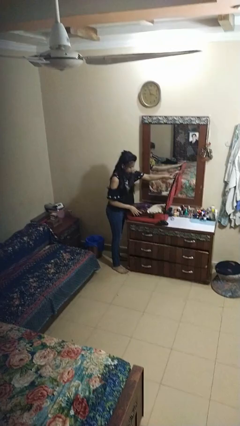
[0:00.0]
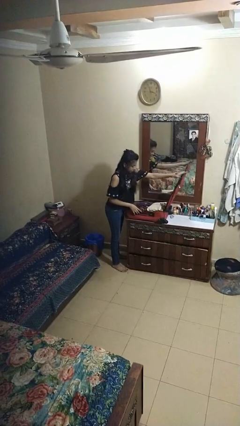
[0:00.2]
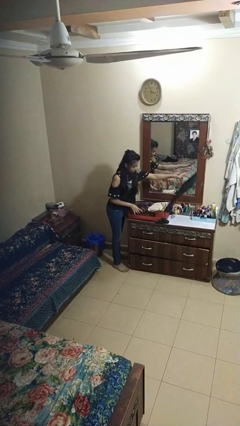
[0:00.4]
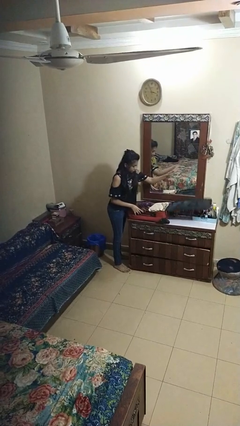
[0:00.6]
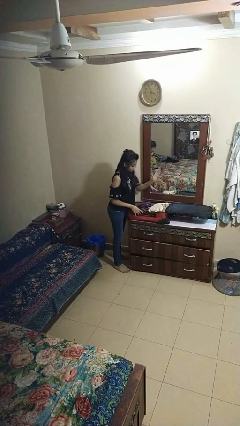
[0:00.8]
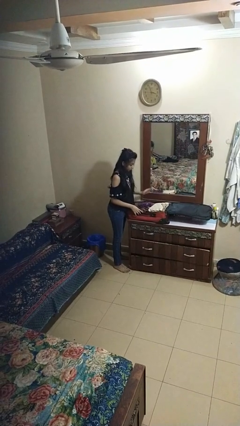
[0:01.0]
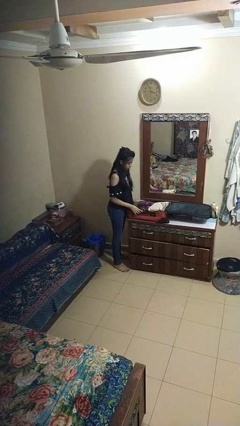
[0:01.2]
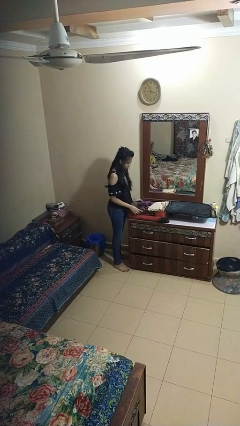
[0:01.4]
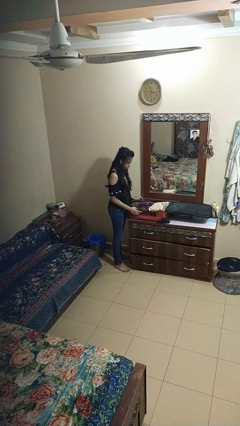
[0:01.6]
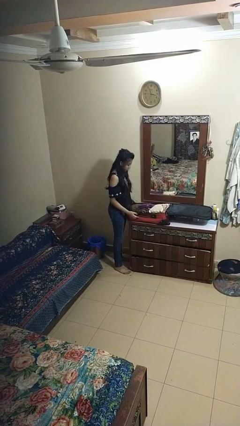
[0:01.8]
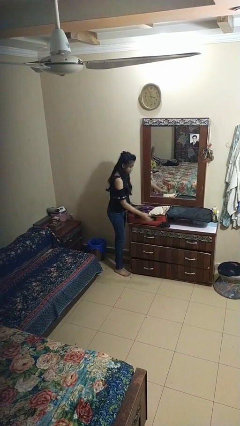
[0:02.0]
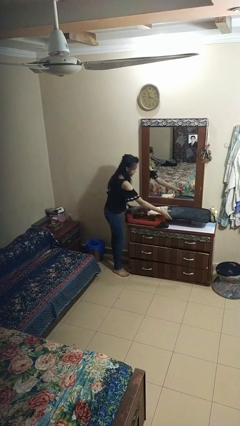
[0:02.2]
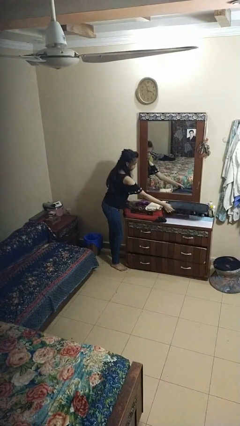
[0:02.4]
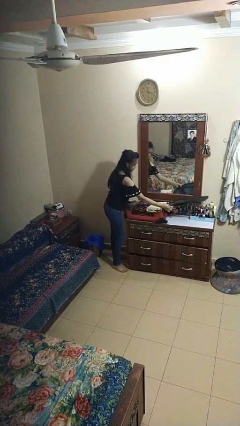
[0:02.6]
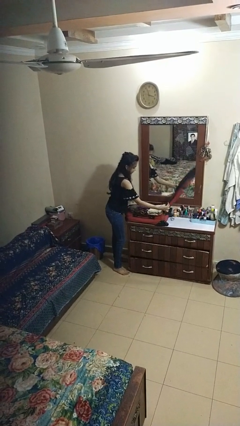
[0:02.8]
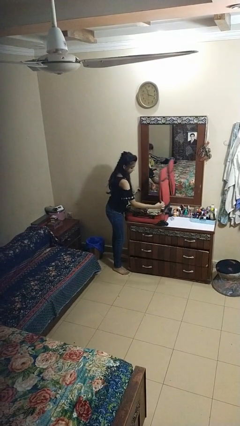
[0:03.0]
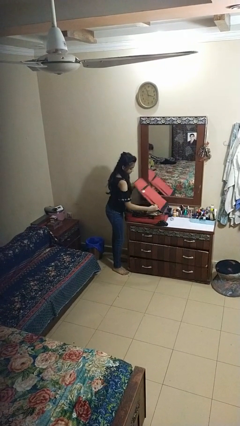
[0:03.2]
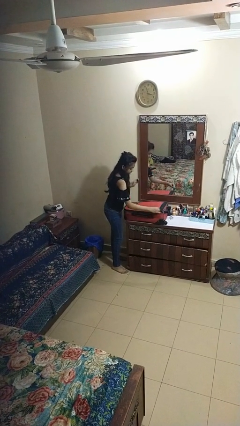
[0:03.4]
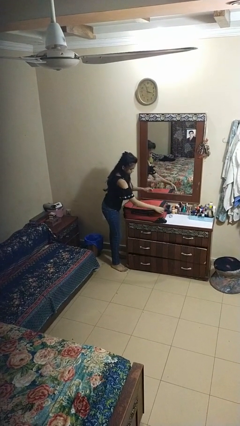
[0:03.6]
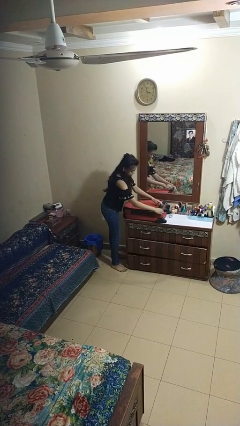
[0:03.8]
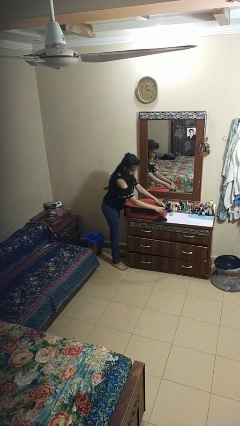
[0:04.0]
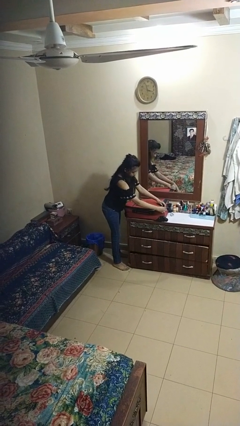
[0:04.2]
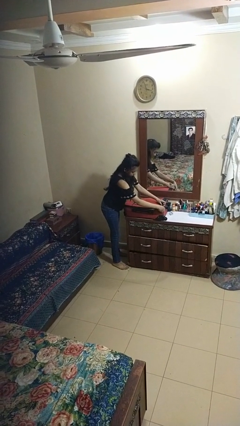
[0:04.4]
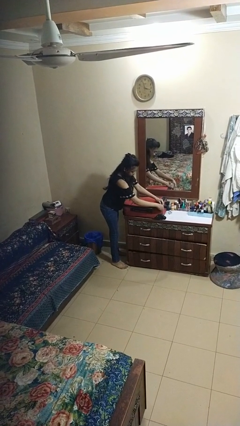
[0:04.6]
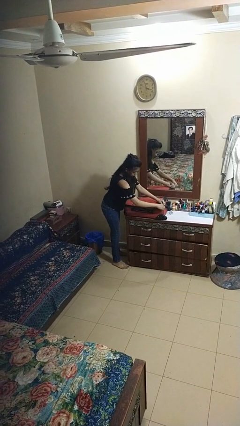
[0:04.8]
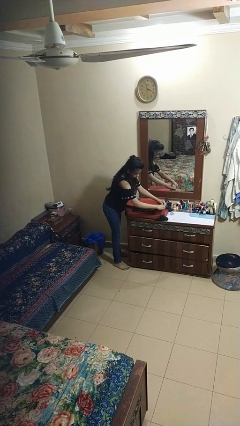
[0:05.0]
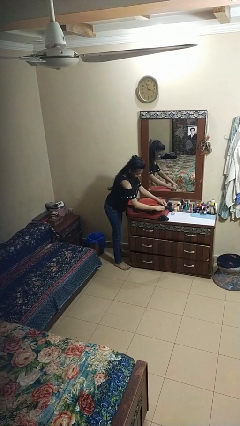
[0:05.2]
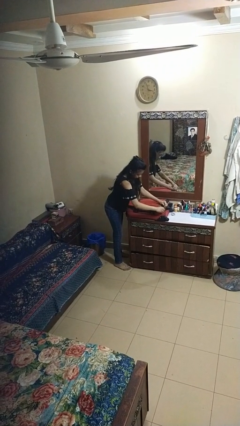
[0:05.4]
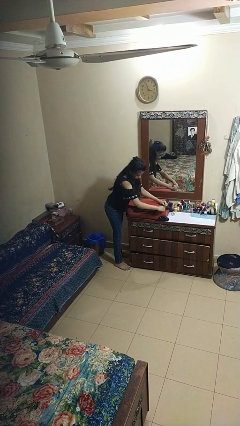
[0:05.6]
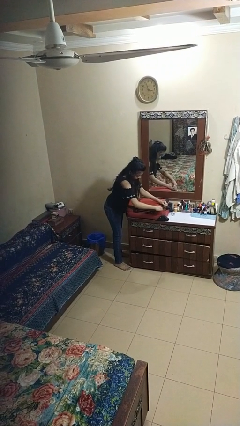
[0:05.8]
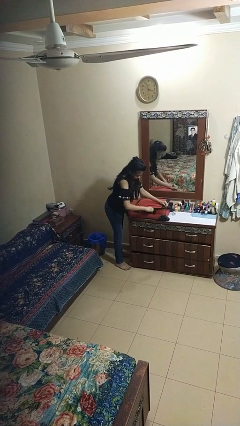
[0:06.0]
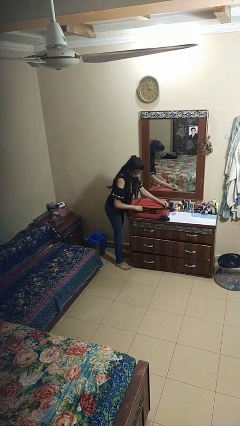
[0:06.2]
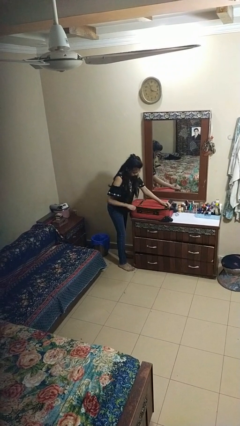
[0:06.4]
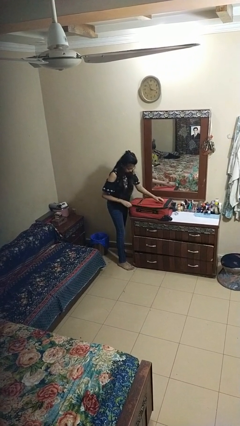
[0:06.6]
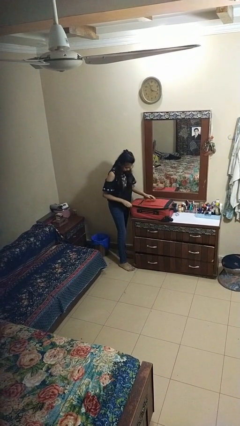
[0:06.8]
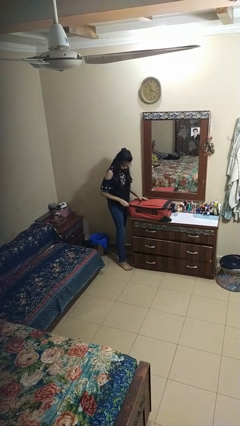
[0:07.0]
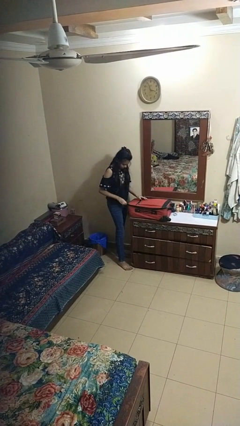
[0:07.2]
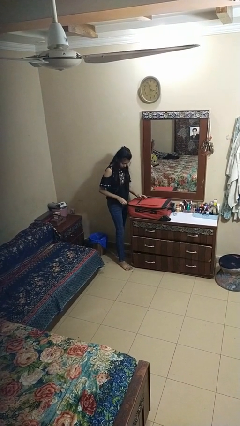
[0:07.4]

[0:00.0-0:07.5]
person closes suitcase

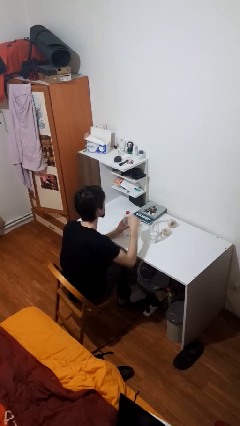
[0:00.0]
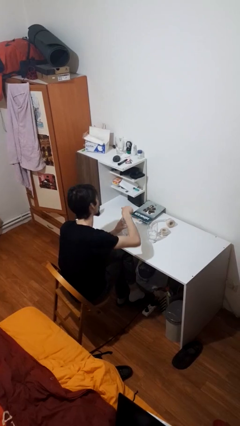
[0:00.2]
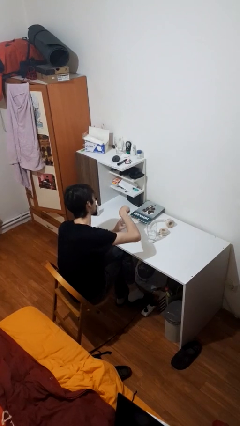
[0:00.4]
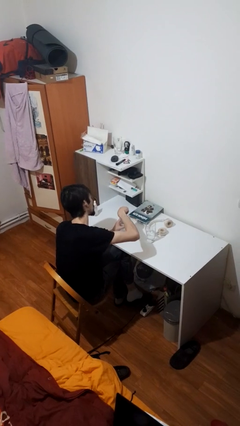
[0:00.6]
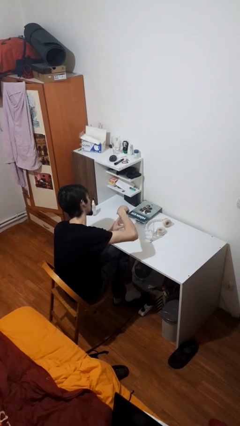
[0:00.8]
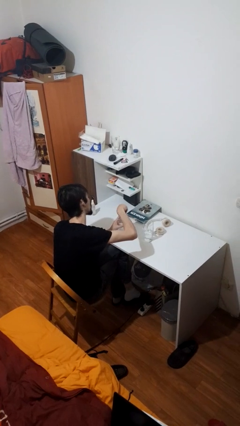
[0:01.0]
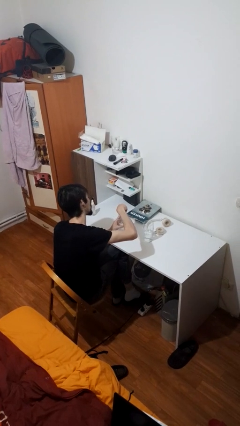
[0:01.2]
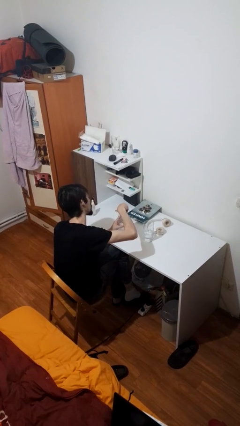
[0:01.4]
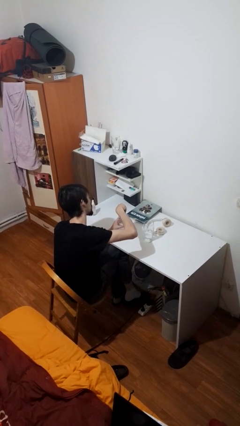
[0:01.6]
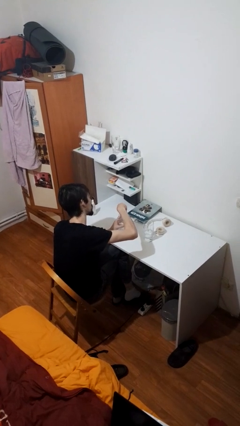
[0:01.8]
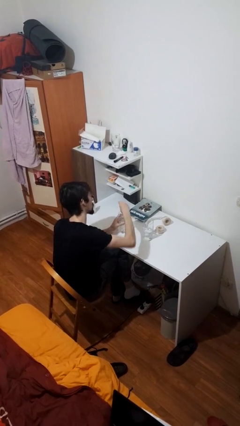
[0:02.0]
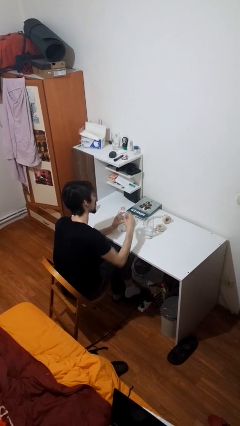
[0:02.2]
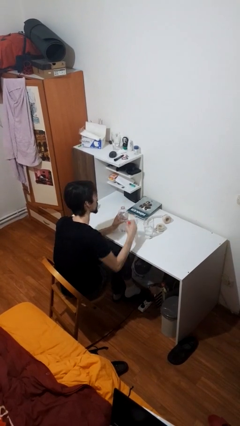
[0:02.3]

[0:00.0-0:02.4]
person unscrews lid from bottle

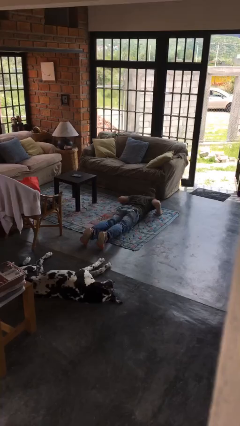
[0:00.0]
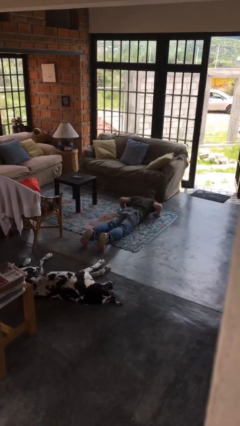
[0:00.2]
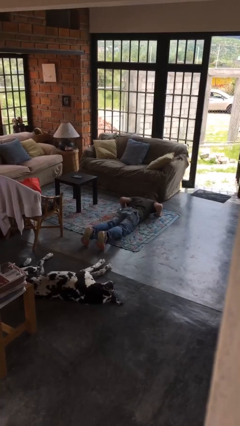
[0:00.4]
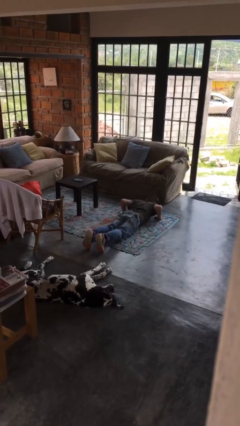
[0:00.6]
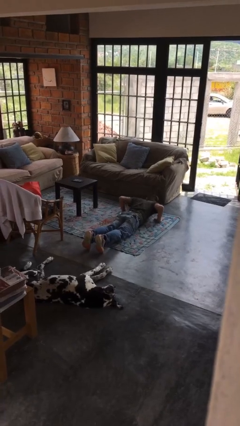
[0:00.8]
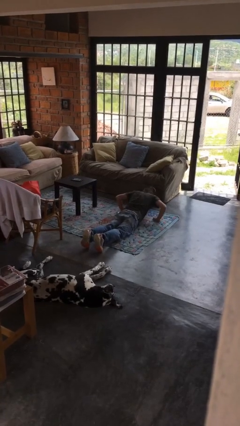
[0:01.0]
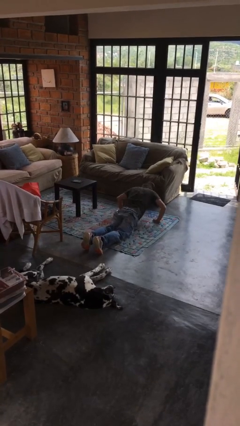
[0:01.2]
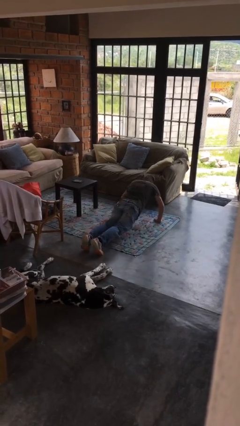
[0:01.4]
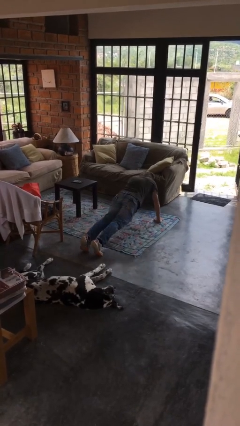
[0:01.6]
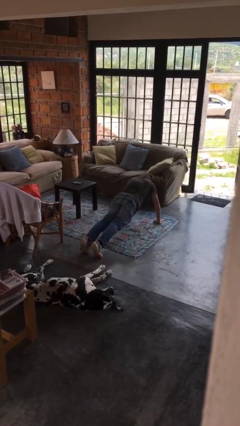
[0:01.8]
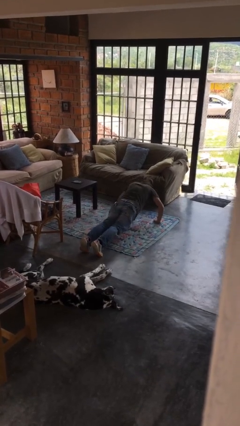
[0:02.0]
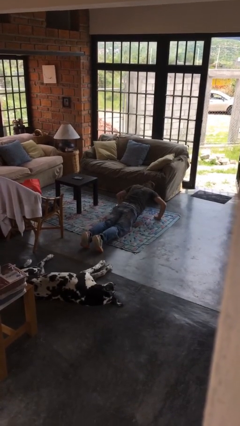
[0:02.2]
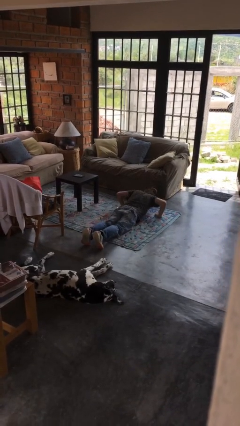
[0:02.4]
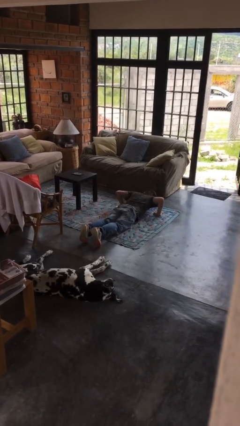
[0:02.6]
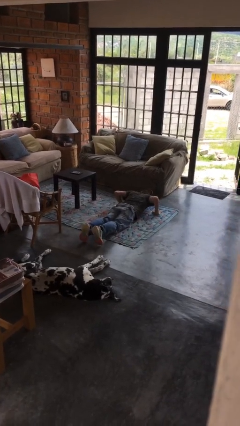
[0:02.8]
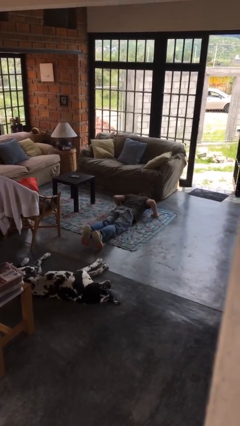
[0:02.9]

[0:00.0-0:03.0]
person exercises with pushup

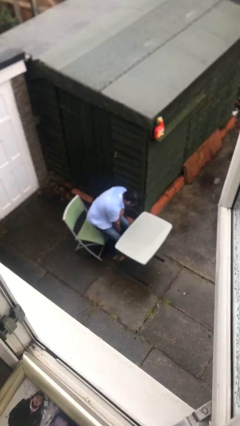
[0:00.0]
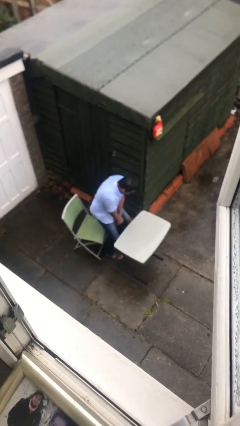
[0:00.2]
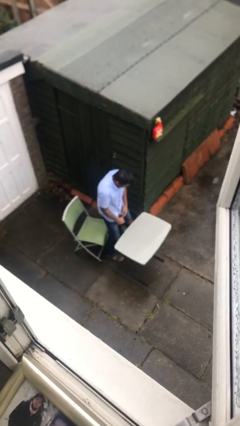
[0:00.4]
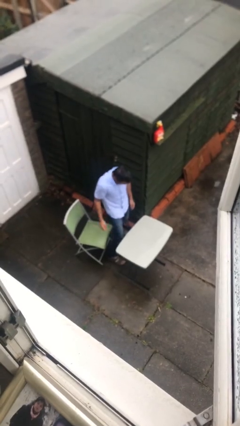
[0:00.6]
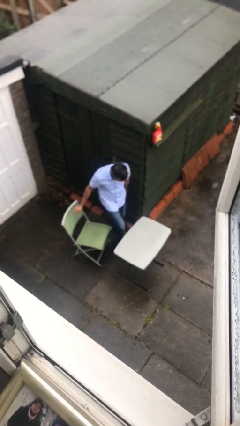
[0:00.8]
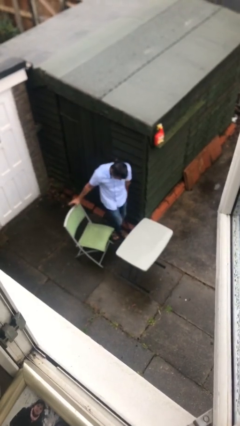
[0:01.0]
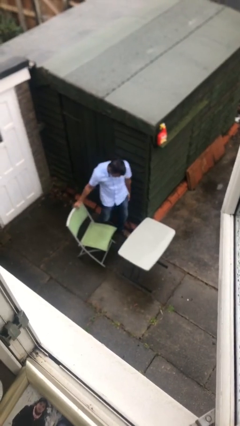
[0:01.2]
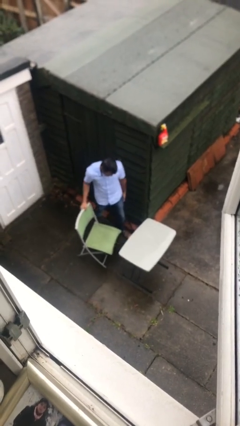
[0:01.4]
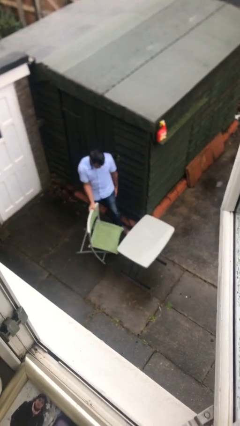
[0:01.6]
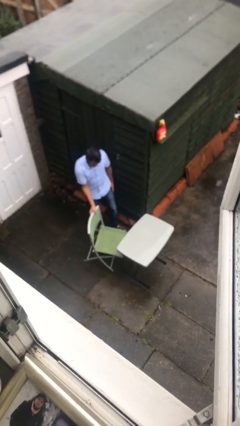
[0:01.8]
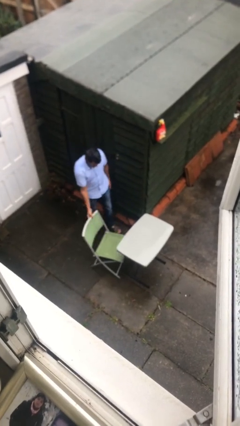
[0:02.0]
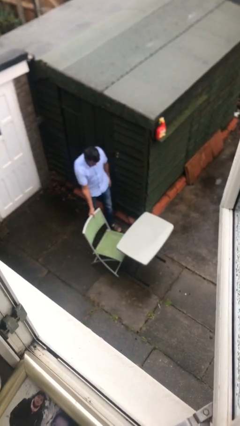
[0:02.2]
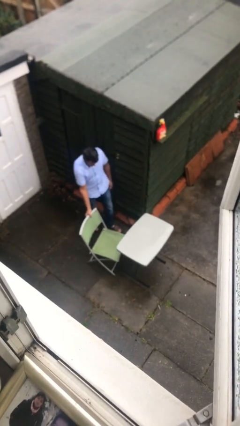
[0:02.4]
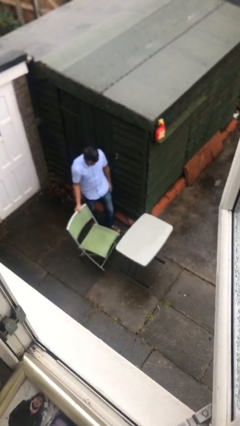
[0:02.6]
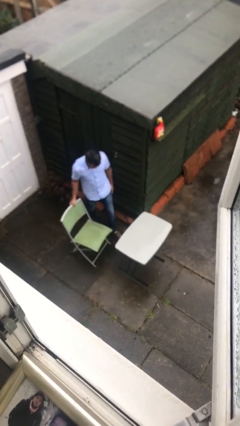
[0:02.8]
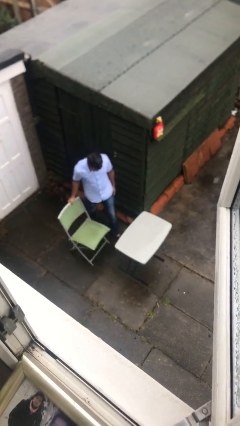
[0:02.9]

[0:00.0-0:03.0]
person stands up

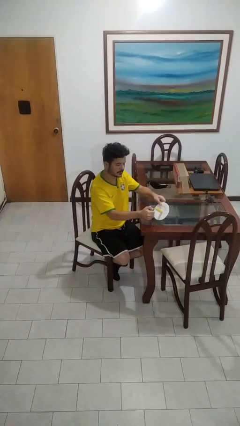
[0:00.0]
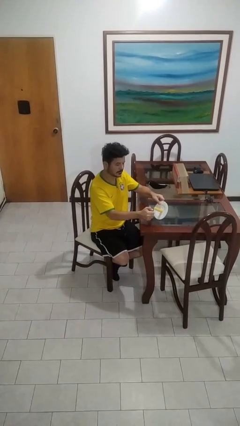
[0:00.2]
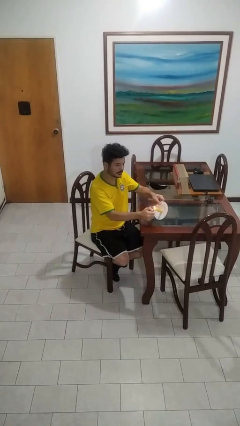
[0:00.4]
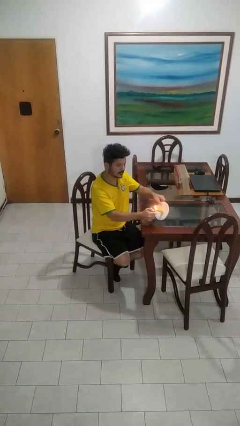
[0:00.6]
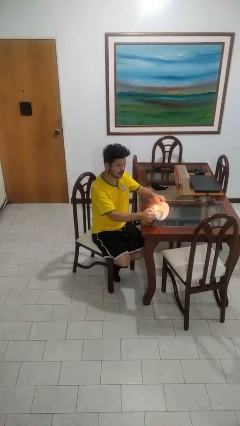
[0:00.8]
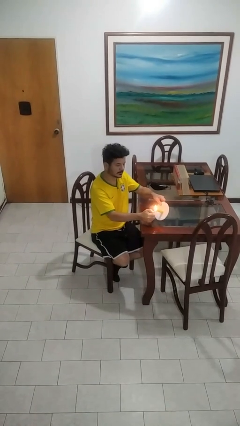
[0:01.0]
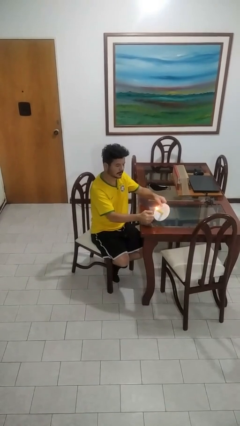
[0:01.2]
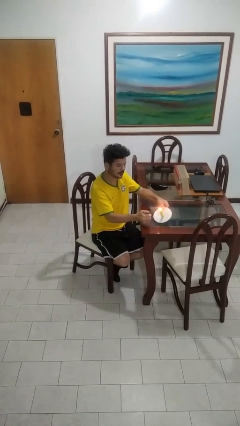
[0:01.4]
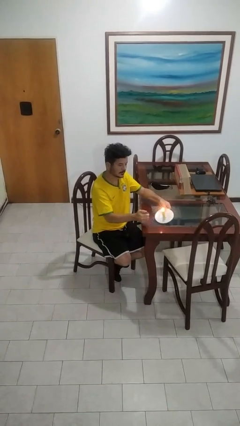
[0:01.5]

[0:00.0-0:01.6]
person lights candle

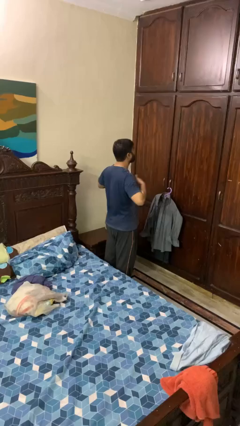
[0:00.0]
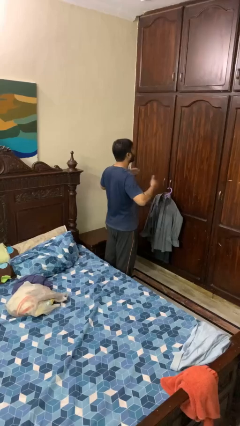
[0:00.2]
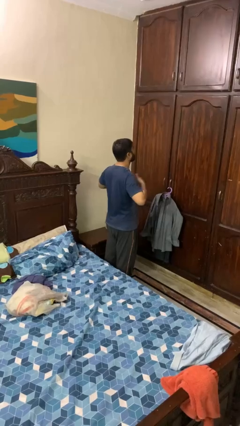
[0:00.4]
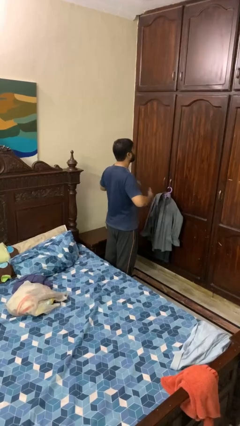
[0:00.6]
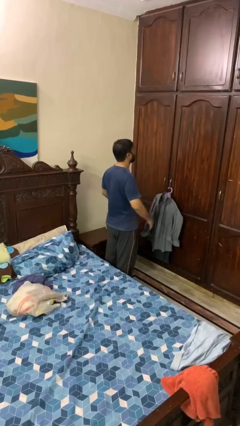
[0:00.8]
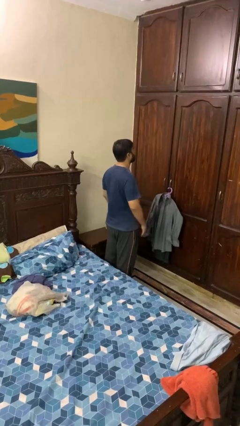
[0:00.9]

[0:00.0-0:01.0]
person drums on chest
